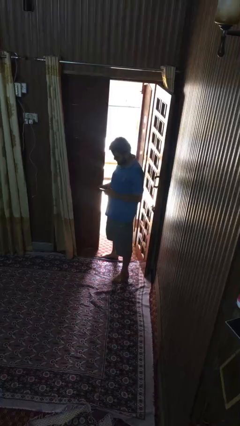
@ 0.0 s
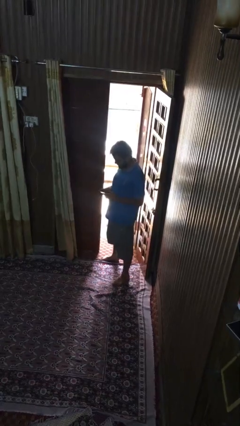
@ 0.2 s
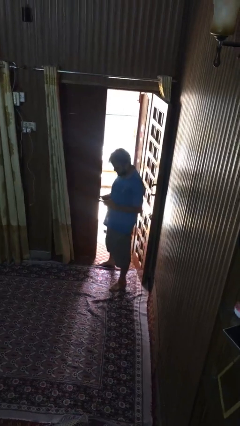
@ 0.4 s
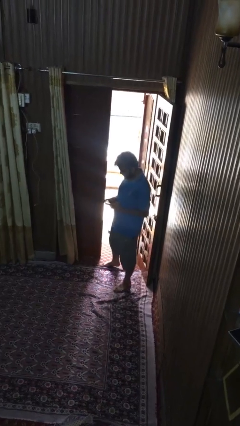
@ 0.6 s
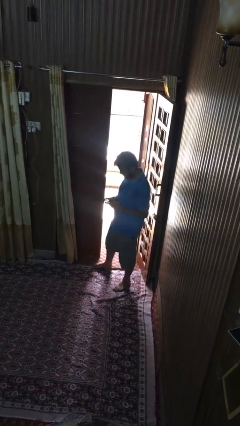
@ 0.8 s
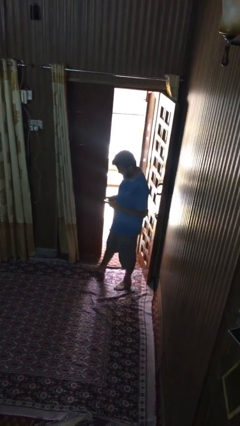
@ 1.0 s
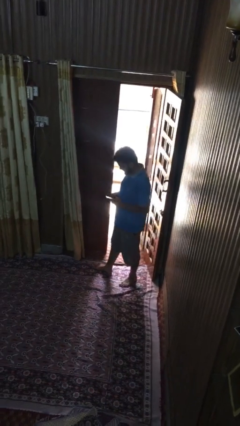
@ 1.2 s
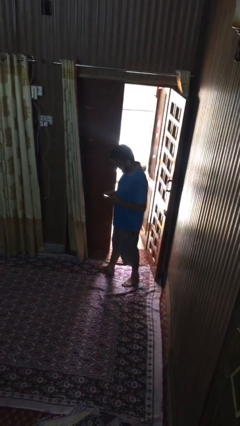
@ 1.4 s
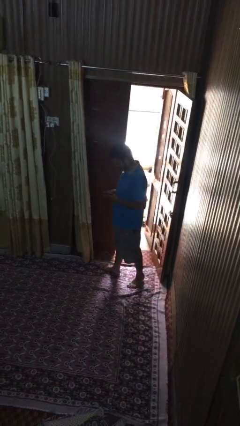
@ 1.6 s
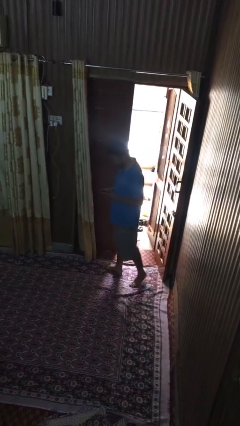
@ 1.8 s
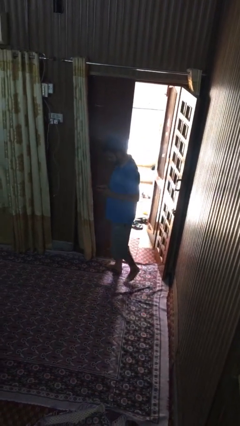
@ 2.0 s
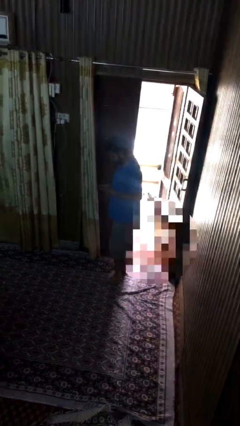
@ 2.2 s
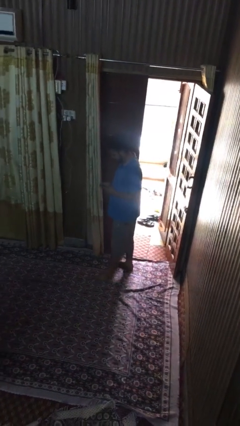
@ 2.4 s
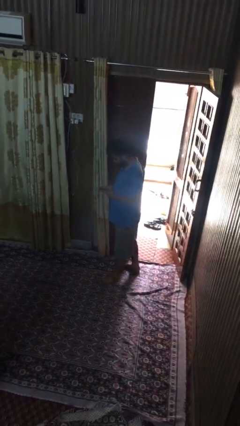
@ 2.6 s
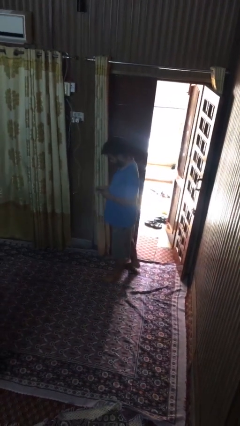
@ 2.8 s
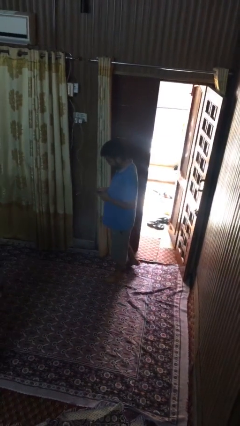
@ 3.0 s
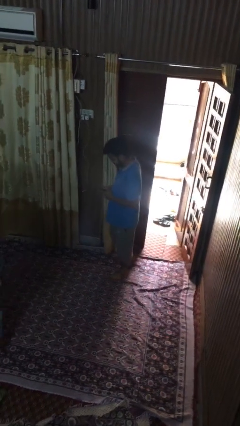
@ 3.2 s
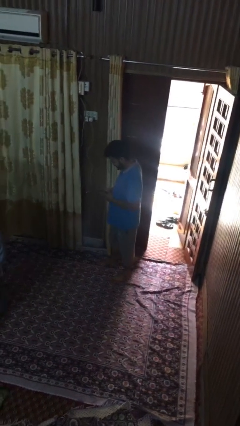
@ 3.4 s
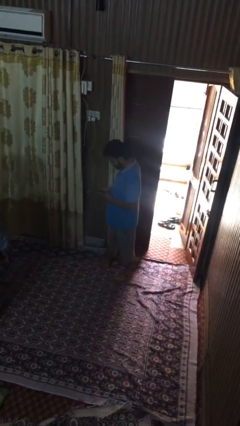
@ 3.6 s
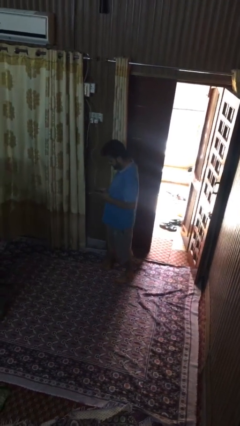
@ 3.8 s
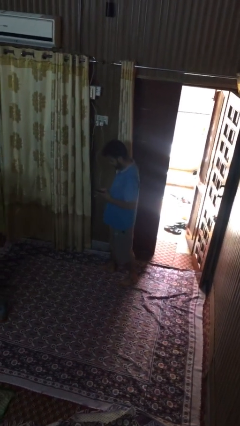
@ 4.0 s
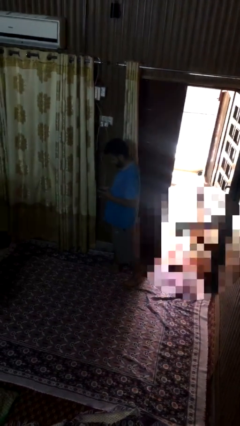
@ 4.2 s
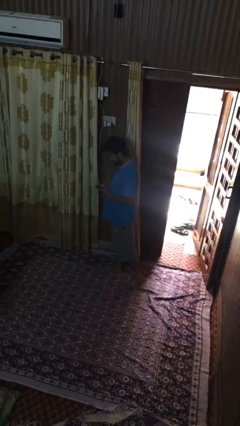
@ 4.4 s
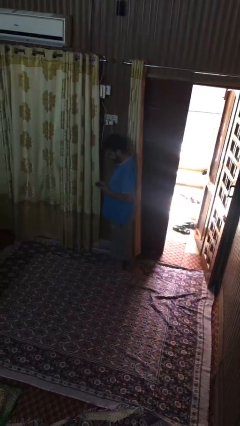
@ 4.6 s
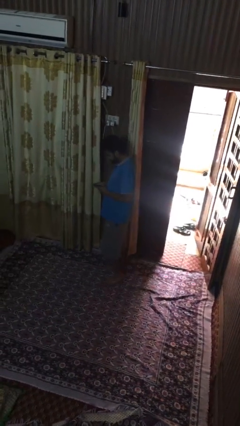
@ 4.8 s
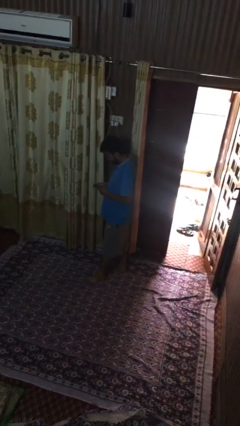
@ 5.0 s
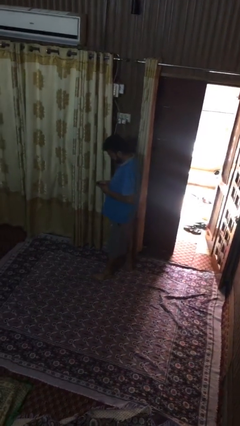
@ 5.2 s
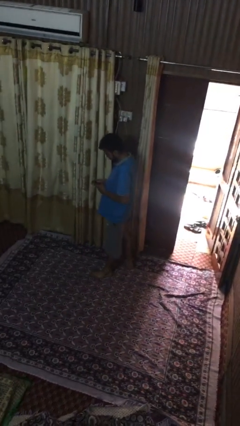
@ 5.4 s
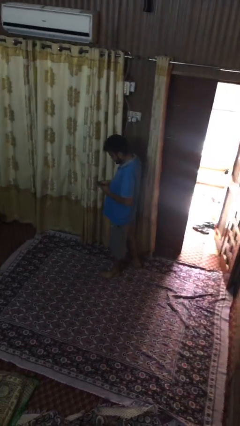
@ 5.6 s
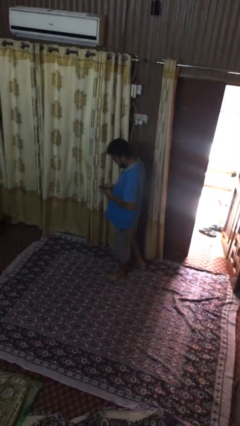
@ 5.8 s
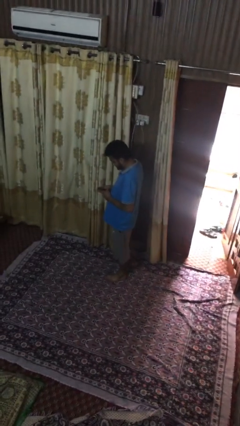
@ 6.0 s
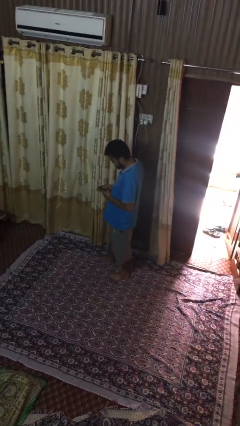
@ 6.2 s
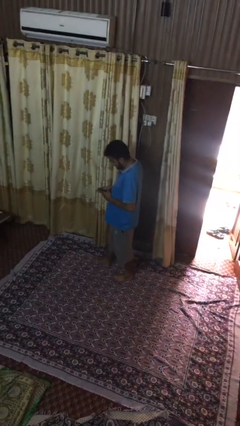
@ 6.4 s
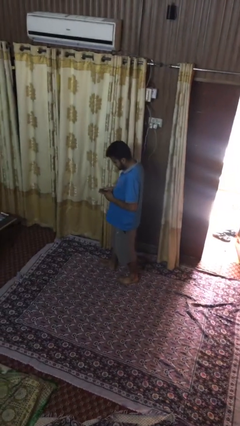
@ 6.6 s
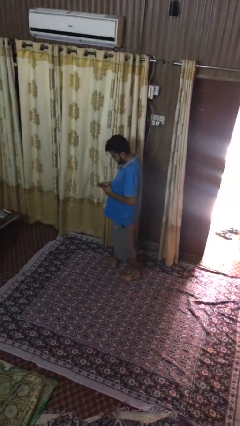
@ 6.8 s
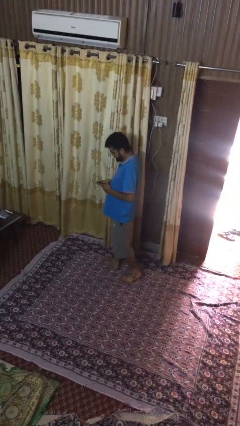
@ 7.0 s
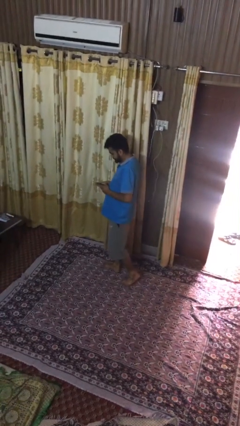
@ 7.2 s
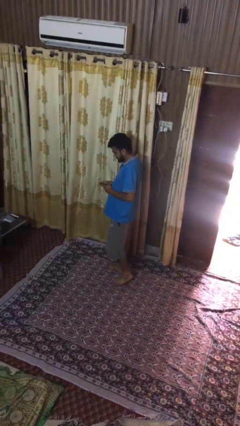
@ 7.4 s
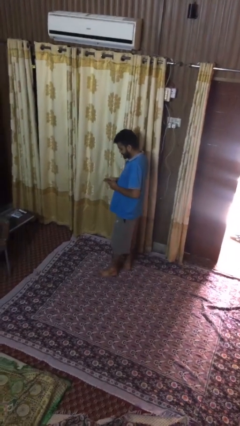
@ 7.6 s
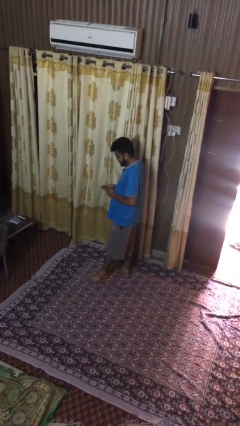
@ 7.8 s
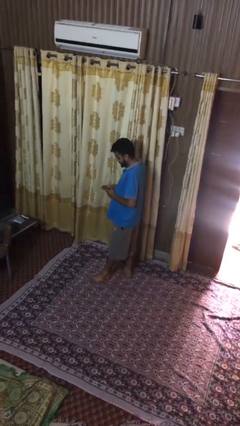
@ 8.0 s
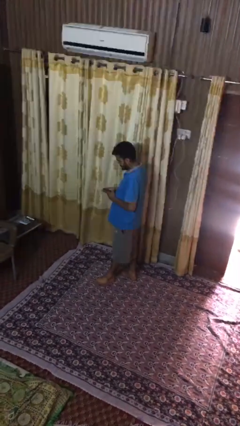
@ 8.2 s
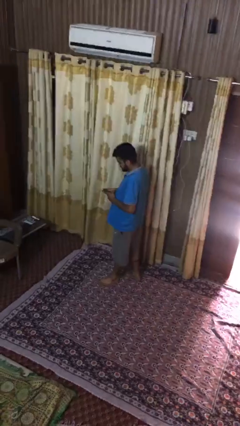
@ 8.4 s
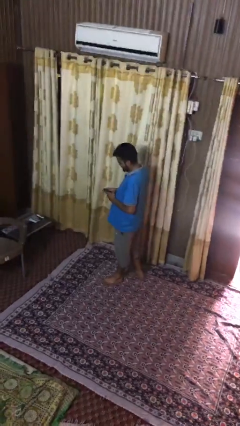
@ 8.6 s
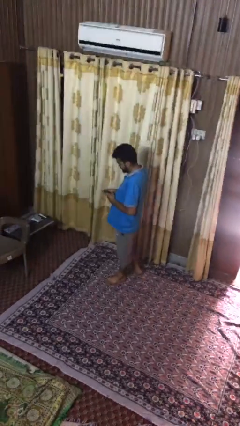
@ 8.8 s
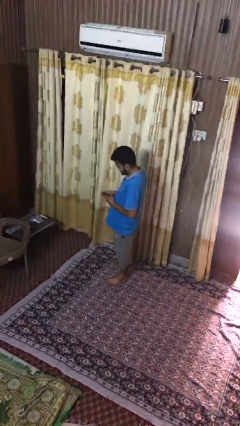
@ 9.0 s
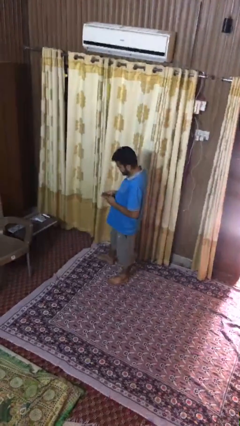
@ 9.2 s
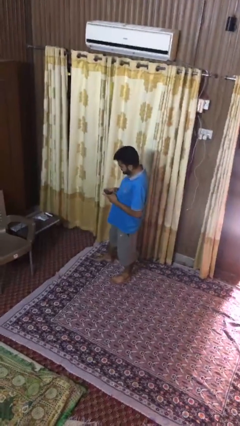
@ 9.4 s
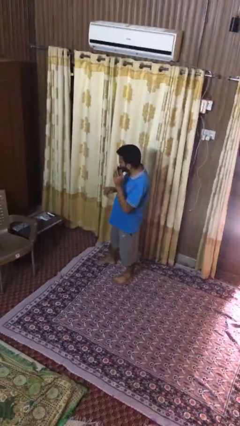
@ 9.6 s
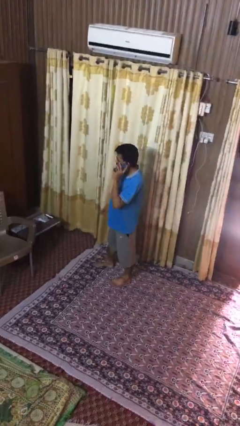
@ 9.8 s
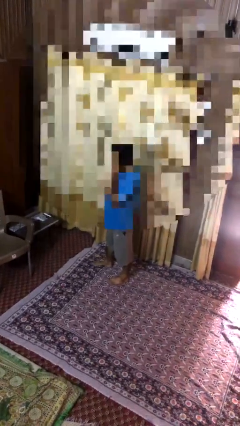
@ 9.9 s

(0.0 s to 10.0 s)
person texts on phone

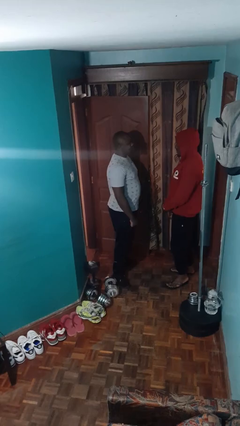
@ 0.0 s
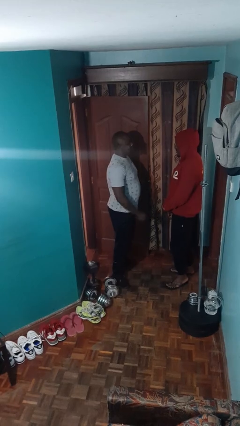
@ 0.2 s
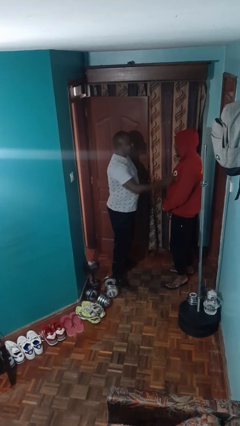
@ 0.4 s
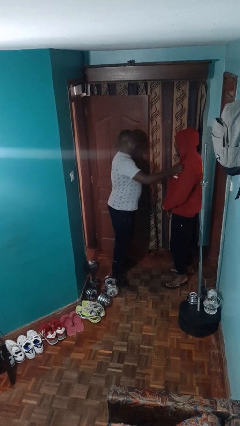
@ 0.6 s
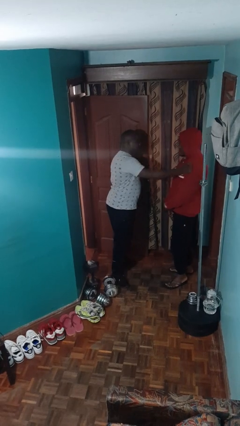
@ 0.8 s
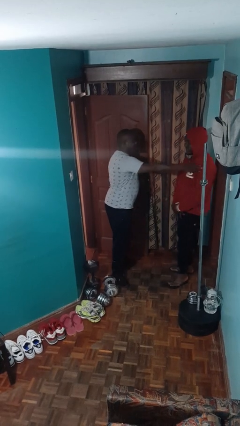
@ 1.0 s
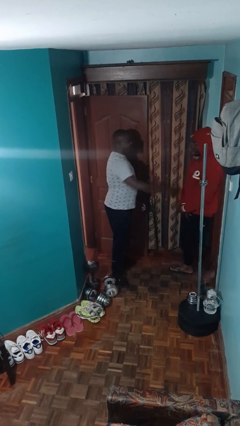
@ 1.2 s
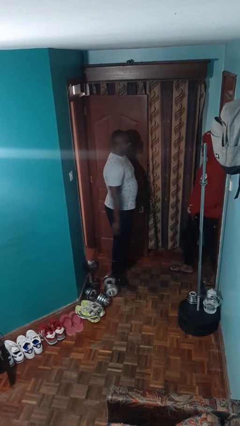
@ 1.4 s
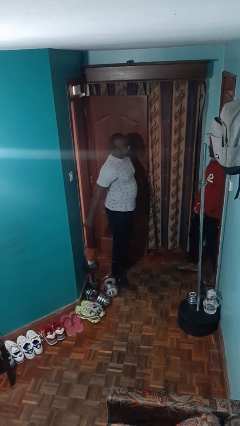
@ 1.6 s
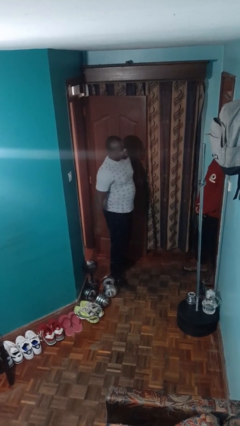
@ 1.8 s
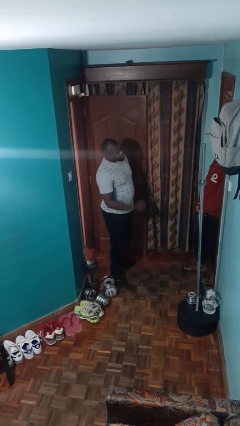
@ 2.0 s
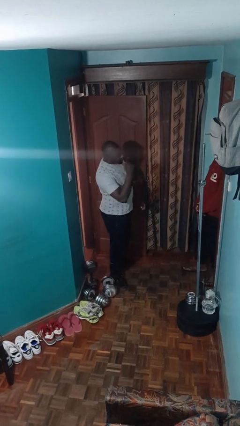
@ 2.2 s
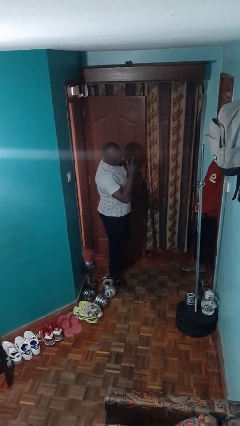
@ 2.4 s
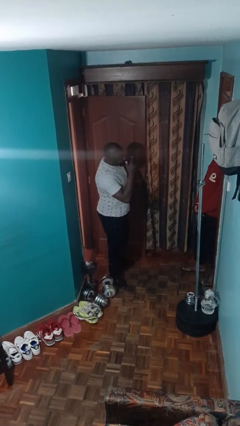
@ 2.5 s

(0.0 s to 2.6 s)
person shoves person

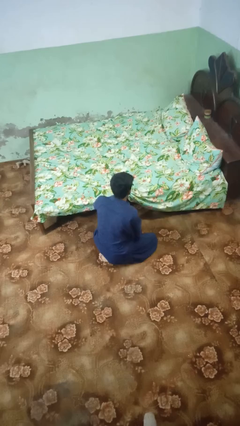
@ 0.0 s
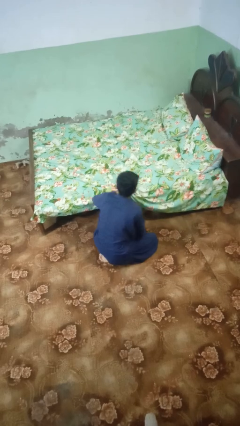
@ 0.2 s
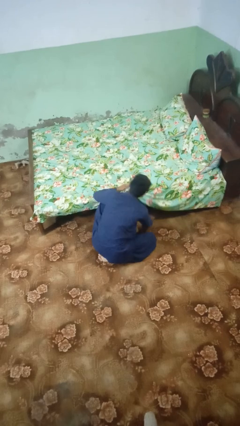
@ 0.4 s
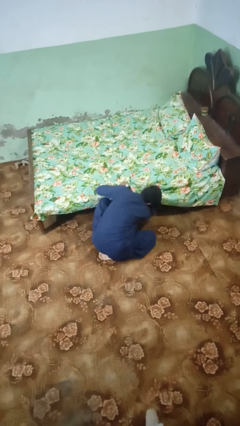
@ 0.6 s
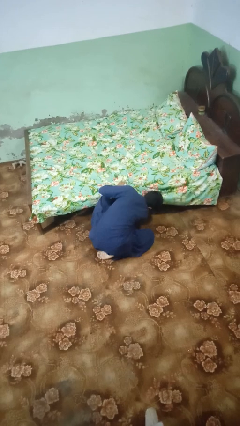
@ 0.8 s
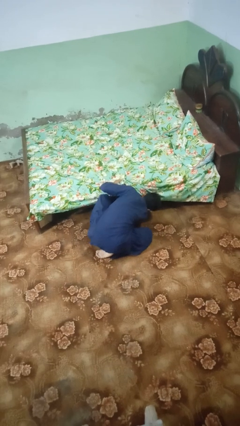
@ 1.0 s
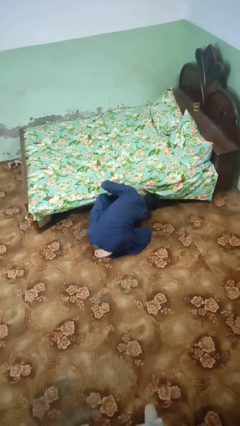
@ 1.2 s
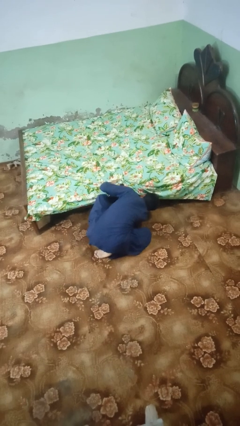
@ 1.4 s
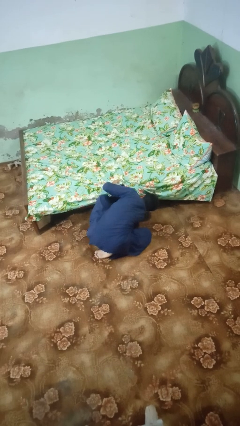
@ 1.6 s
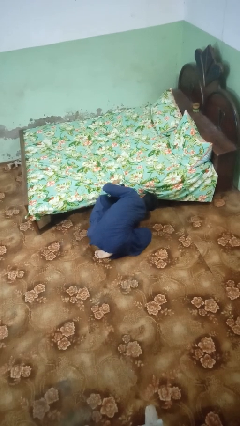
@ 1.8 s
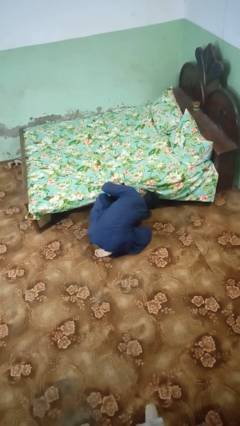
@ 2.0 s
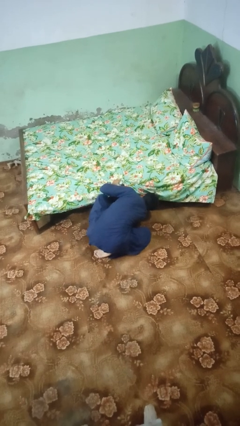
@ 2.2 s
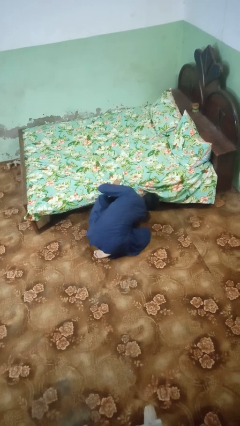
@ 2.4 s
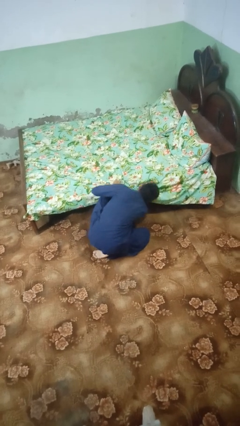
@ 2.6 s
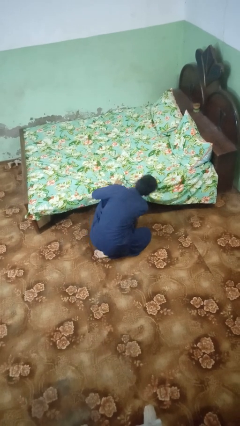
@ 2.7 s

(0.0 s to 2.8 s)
person searches under bed

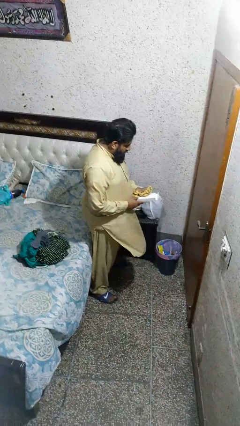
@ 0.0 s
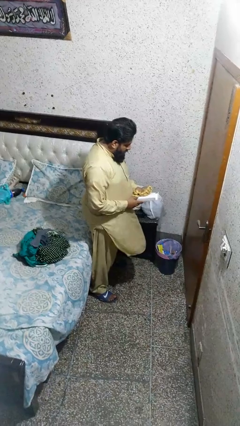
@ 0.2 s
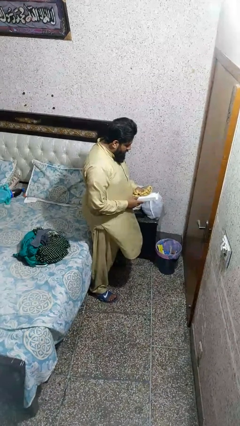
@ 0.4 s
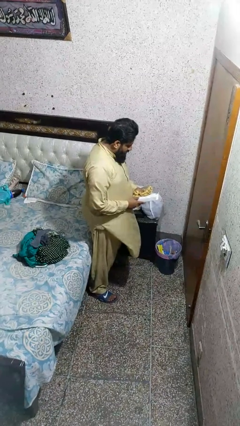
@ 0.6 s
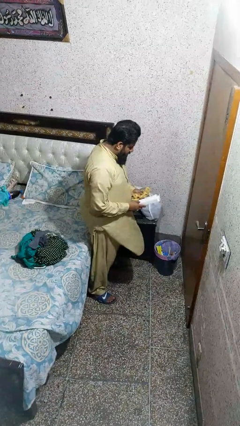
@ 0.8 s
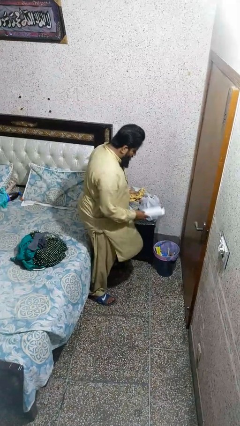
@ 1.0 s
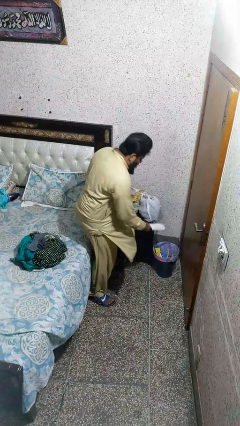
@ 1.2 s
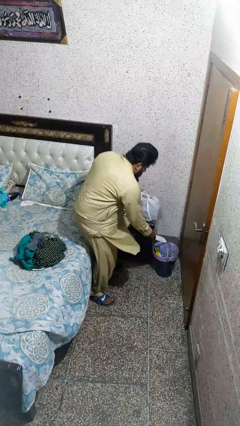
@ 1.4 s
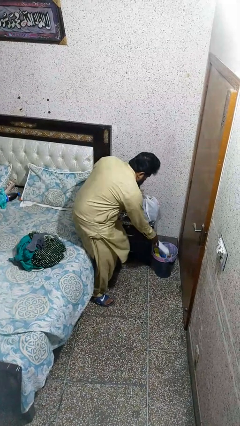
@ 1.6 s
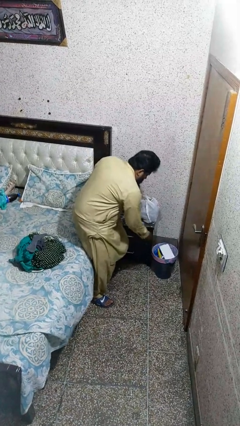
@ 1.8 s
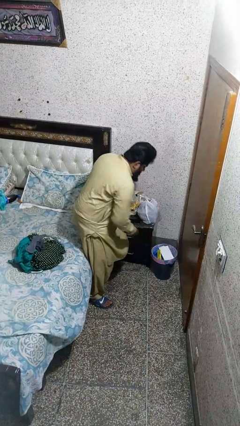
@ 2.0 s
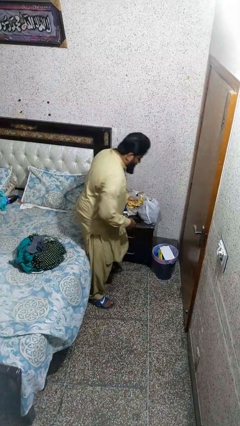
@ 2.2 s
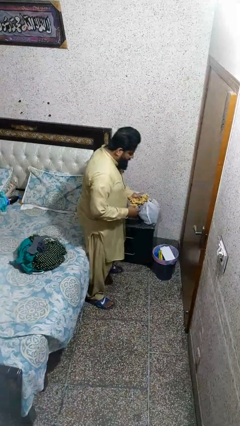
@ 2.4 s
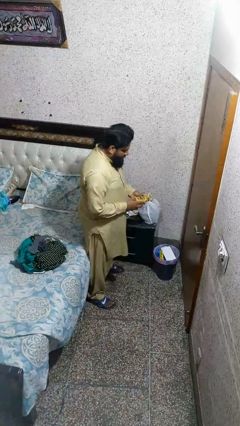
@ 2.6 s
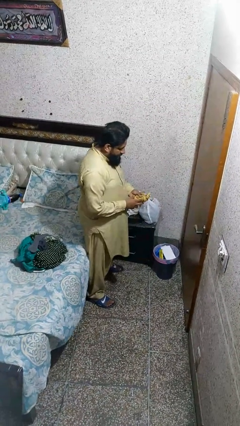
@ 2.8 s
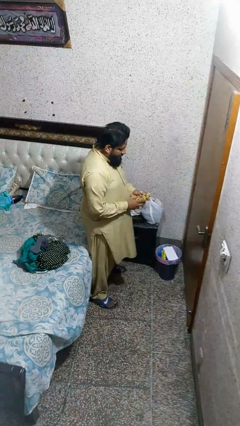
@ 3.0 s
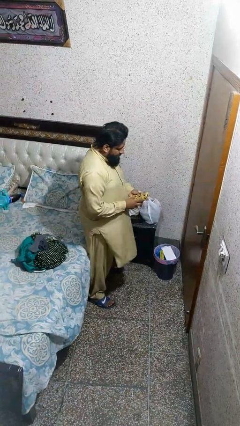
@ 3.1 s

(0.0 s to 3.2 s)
person discards trash
